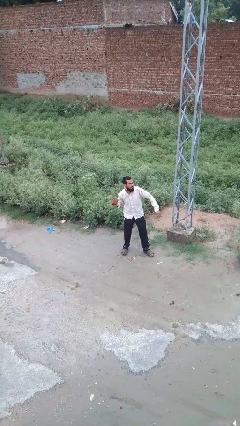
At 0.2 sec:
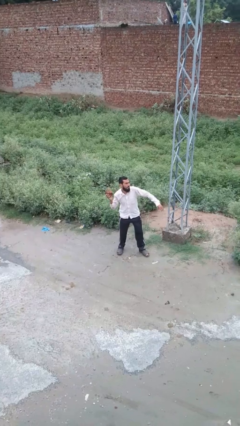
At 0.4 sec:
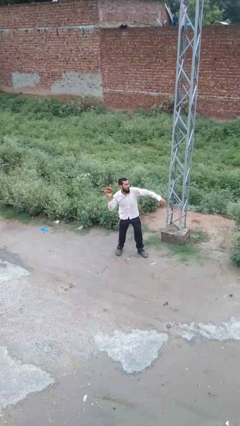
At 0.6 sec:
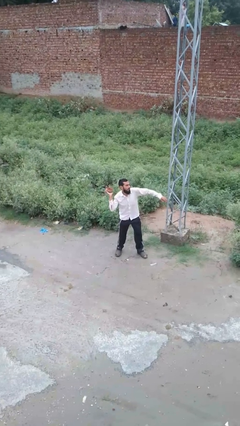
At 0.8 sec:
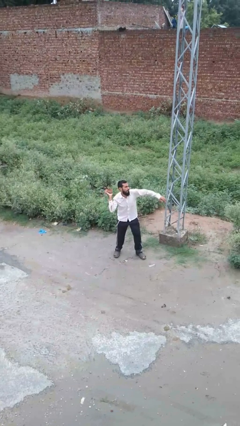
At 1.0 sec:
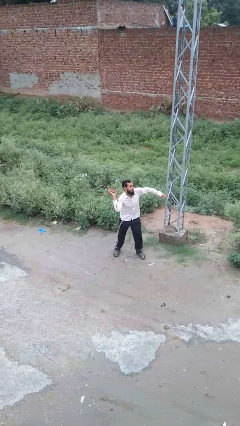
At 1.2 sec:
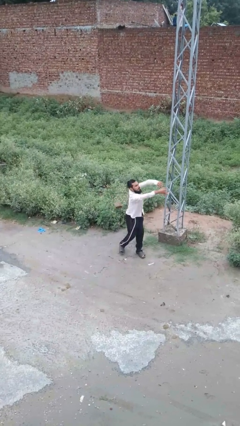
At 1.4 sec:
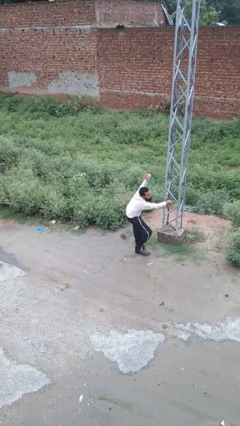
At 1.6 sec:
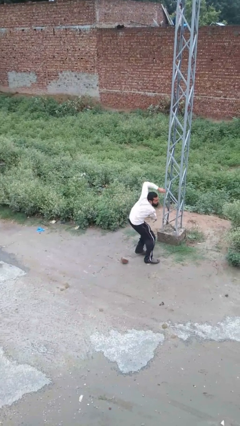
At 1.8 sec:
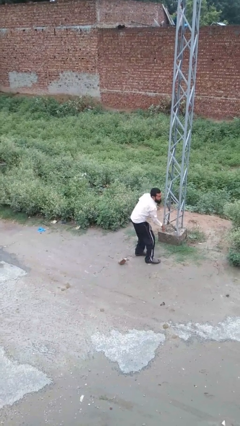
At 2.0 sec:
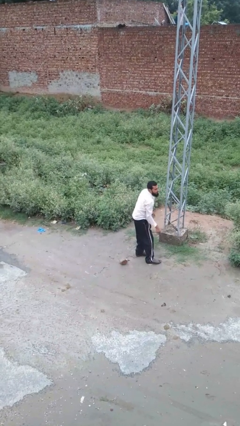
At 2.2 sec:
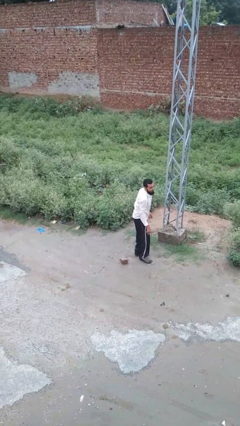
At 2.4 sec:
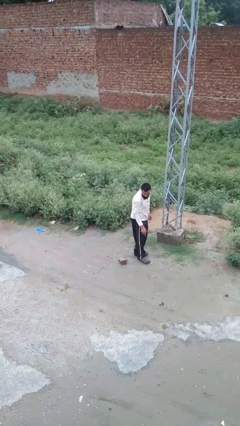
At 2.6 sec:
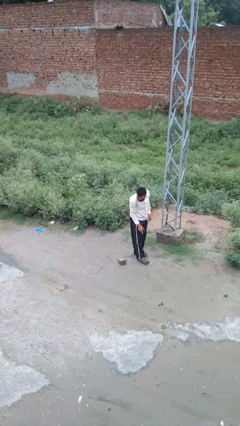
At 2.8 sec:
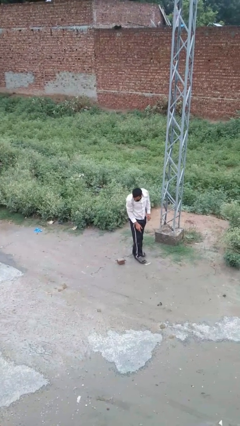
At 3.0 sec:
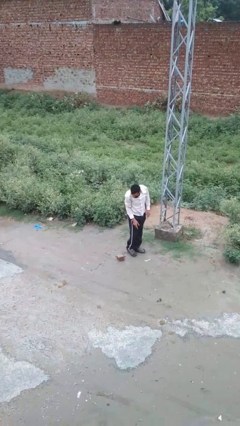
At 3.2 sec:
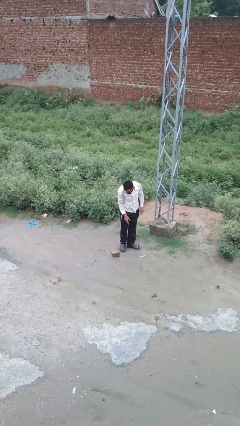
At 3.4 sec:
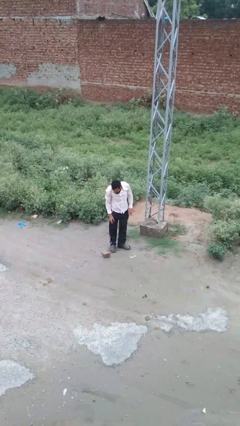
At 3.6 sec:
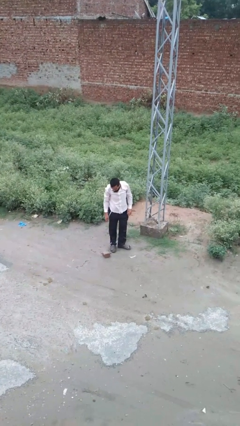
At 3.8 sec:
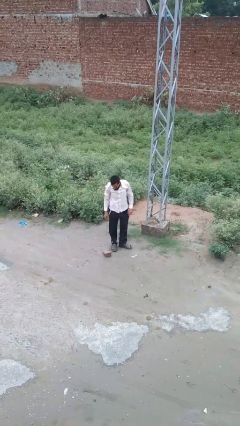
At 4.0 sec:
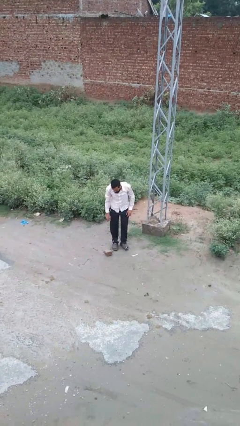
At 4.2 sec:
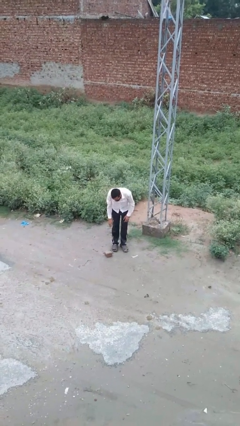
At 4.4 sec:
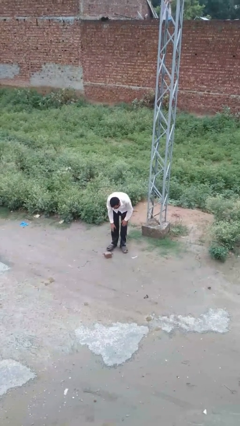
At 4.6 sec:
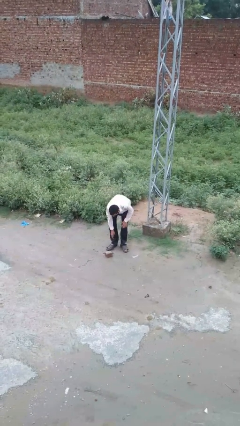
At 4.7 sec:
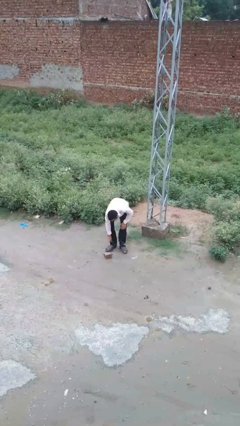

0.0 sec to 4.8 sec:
person drops object

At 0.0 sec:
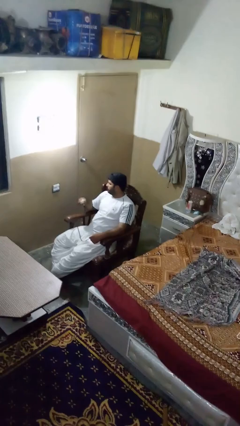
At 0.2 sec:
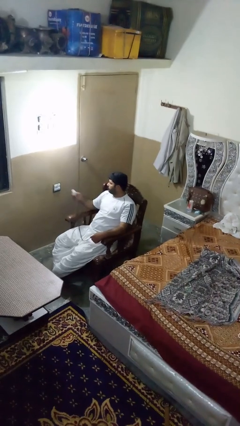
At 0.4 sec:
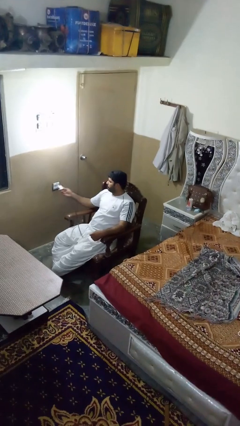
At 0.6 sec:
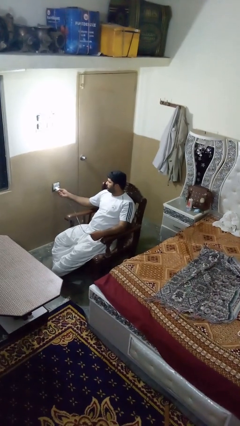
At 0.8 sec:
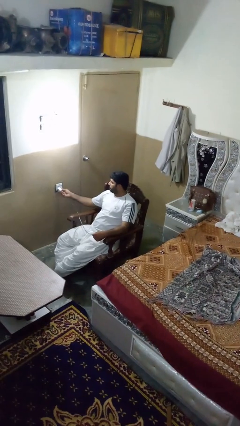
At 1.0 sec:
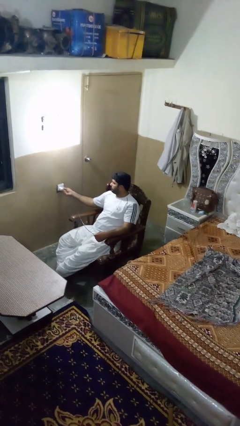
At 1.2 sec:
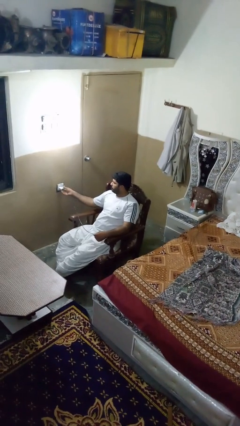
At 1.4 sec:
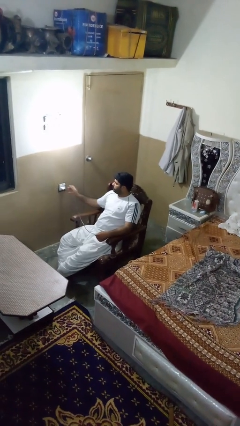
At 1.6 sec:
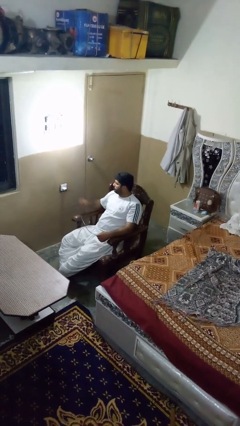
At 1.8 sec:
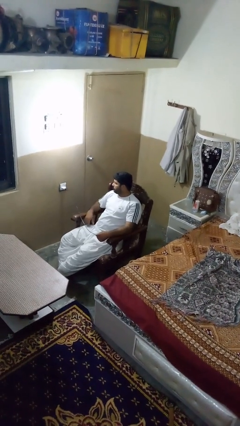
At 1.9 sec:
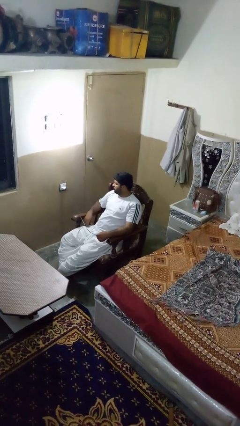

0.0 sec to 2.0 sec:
person plugs into electrical socket

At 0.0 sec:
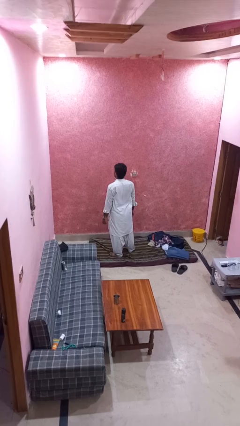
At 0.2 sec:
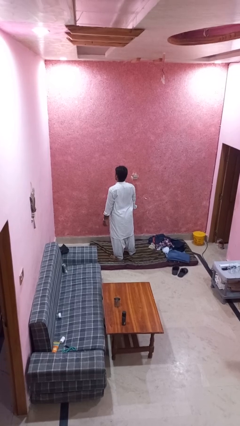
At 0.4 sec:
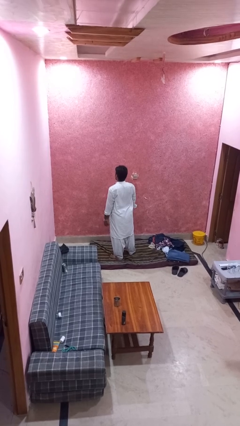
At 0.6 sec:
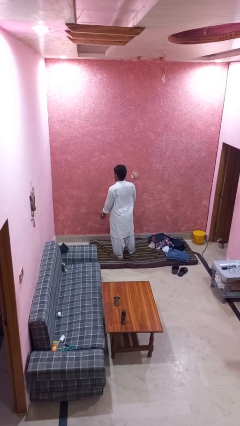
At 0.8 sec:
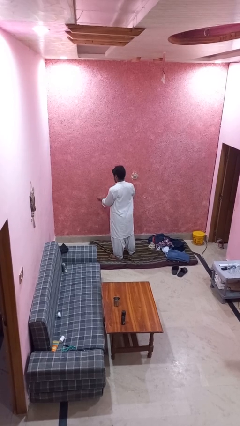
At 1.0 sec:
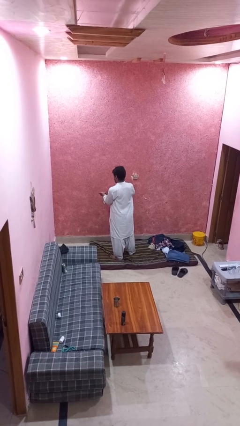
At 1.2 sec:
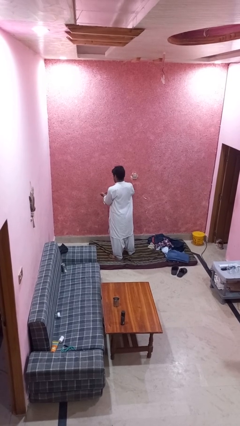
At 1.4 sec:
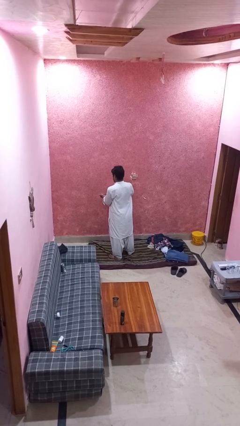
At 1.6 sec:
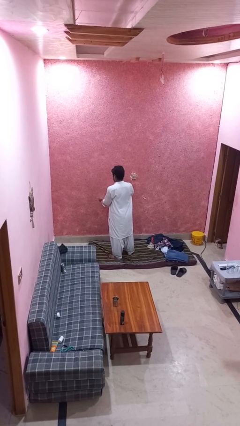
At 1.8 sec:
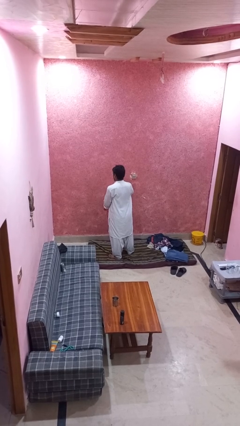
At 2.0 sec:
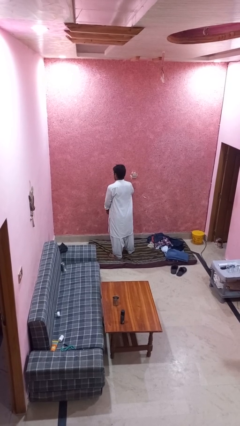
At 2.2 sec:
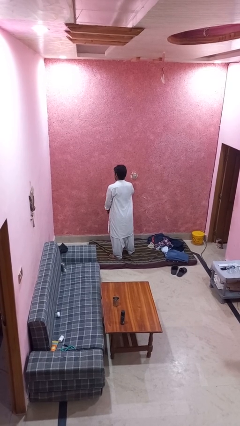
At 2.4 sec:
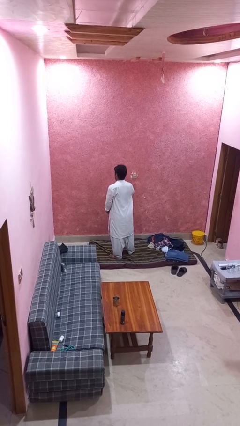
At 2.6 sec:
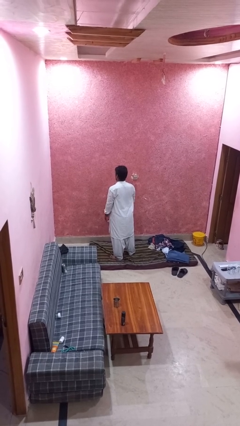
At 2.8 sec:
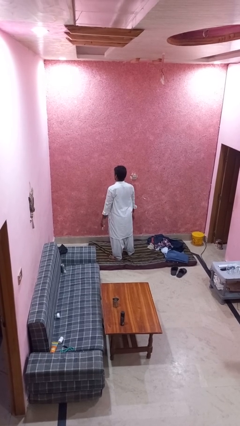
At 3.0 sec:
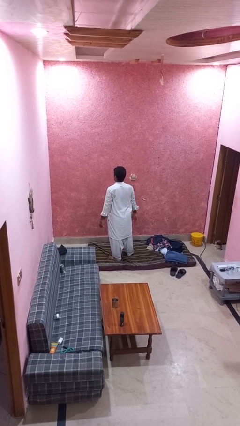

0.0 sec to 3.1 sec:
person takes off wristwatch

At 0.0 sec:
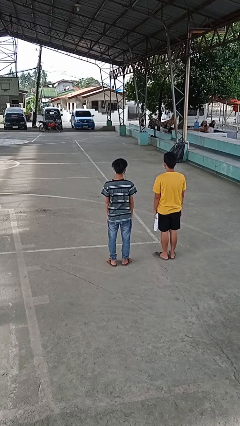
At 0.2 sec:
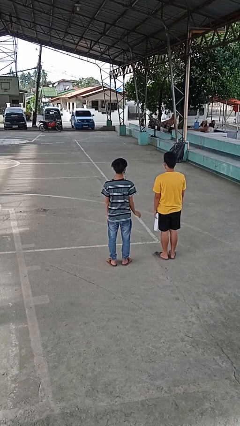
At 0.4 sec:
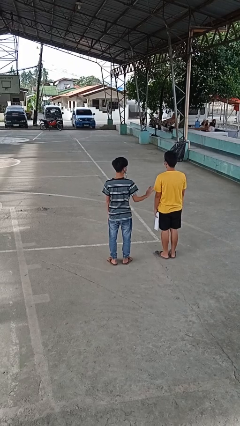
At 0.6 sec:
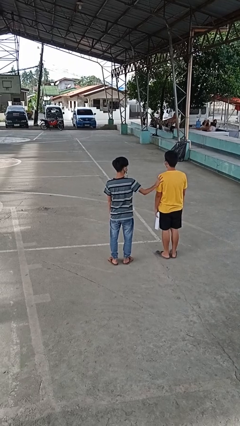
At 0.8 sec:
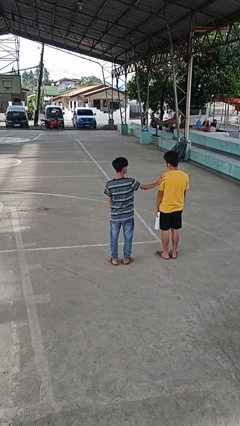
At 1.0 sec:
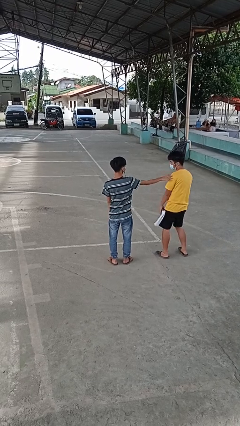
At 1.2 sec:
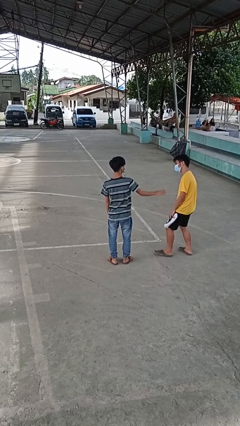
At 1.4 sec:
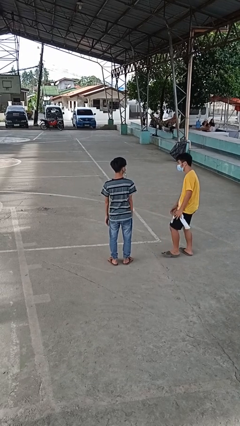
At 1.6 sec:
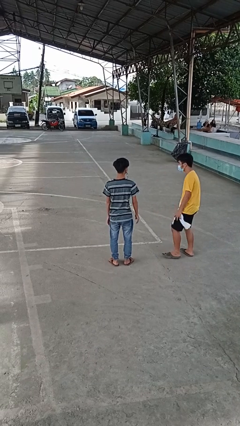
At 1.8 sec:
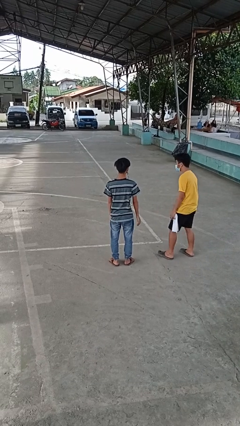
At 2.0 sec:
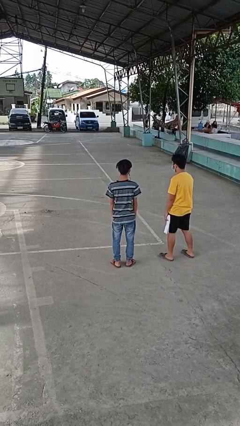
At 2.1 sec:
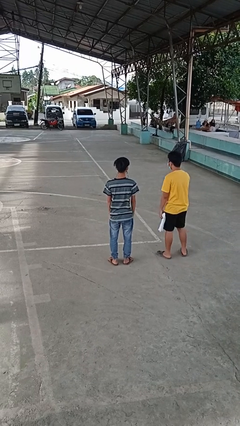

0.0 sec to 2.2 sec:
person shoves person

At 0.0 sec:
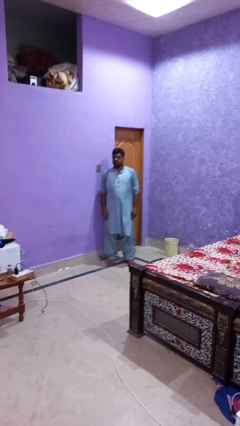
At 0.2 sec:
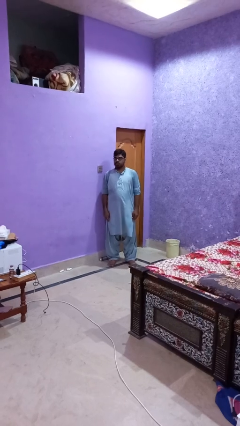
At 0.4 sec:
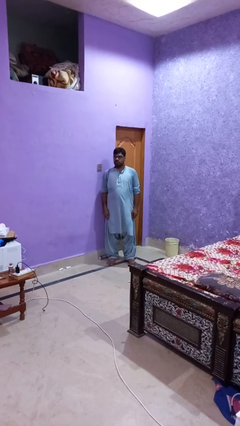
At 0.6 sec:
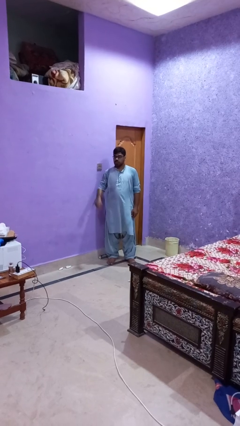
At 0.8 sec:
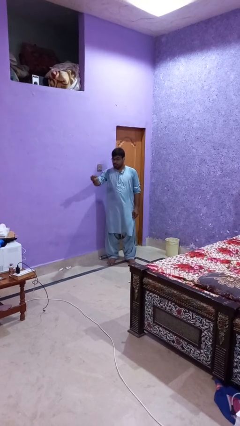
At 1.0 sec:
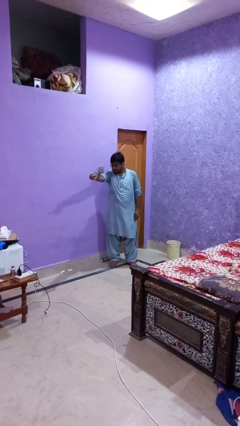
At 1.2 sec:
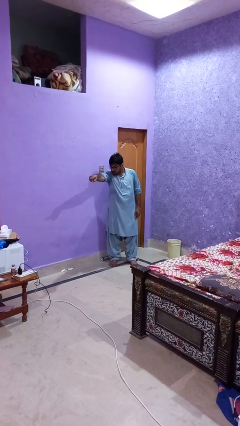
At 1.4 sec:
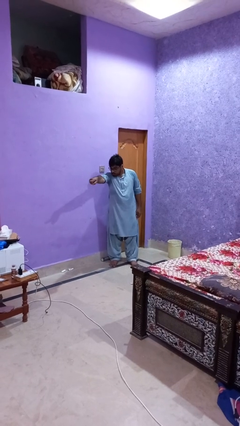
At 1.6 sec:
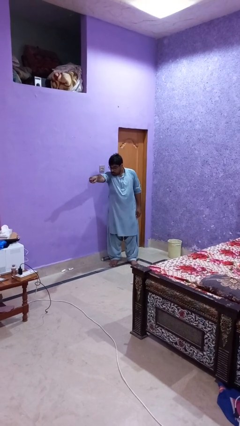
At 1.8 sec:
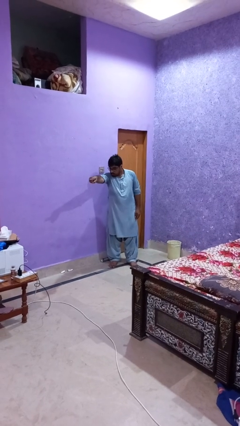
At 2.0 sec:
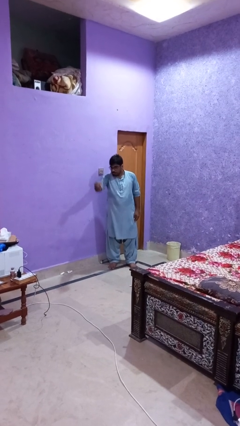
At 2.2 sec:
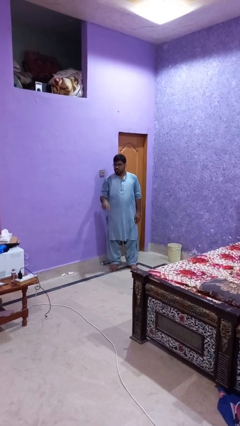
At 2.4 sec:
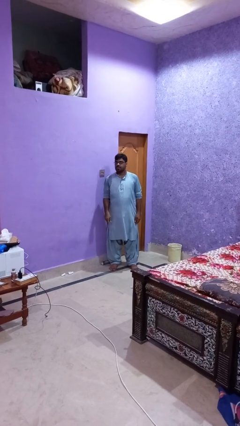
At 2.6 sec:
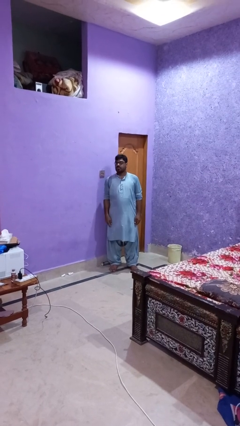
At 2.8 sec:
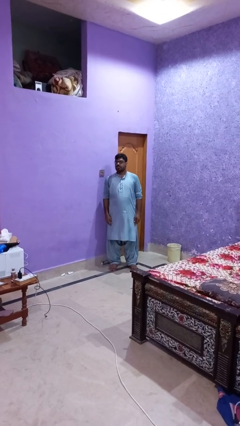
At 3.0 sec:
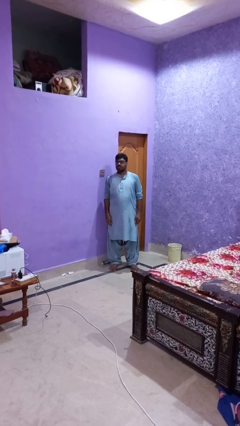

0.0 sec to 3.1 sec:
person points at person

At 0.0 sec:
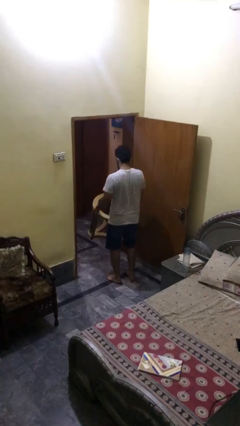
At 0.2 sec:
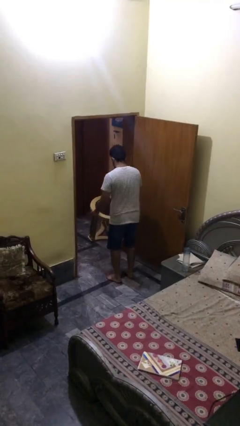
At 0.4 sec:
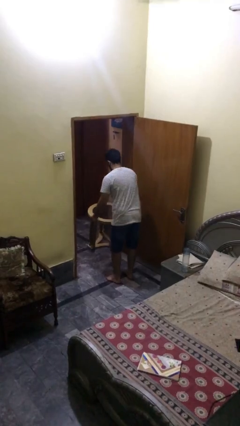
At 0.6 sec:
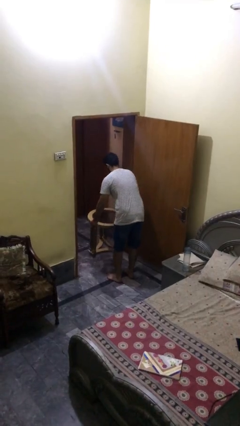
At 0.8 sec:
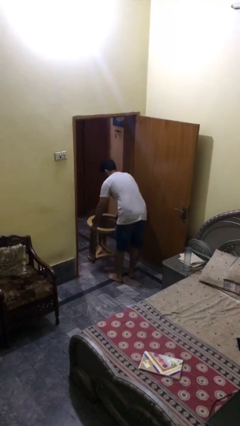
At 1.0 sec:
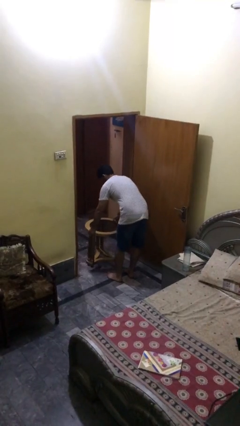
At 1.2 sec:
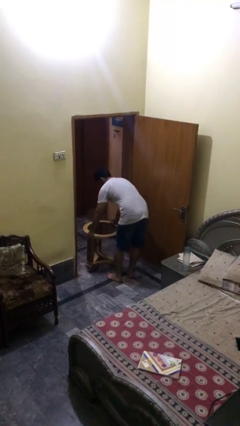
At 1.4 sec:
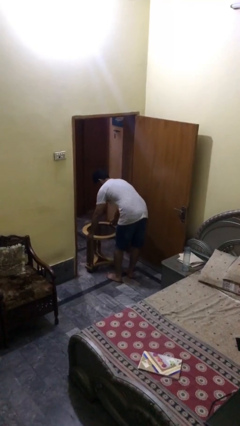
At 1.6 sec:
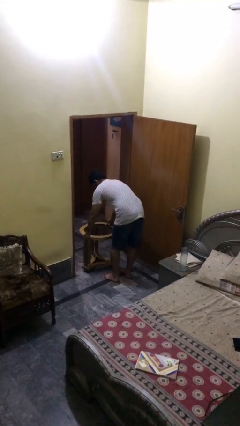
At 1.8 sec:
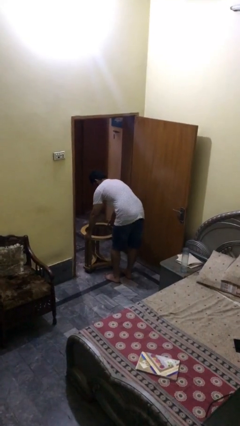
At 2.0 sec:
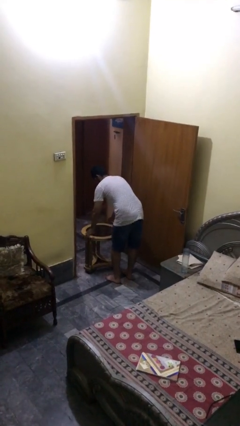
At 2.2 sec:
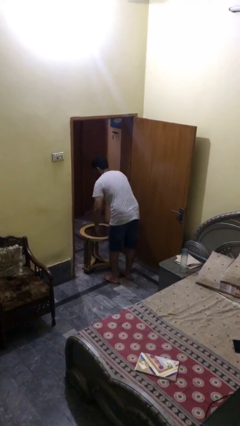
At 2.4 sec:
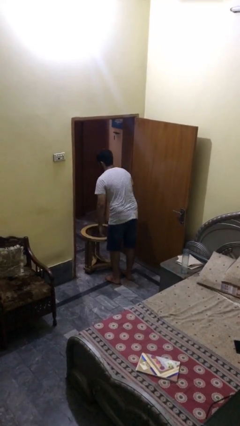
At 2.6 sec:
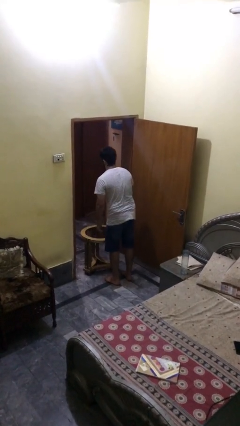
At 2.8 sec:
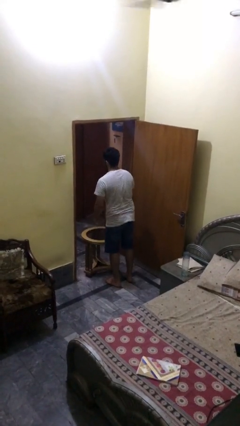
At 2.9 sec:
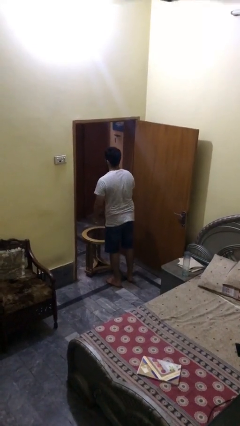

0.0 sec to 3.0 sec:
person puts down object on floor
